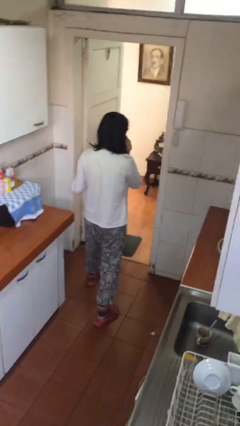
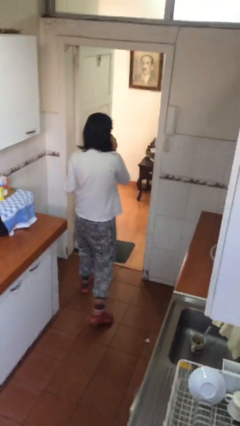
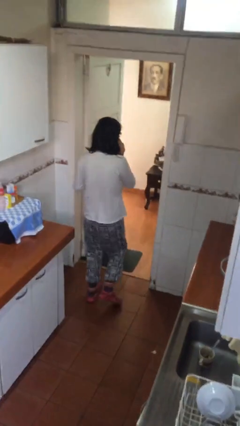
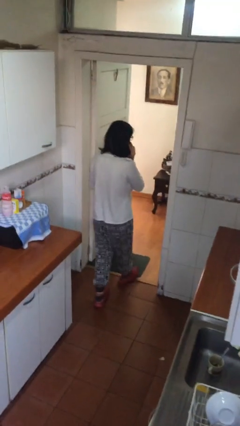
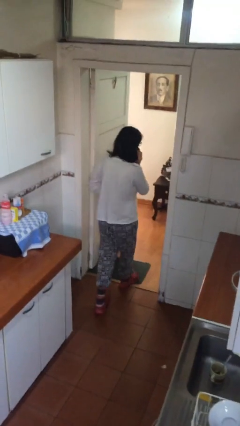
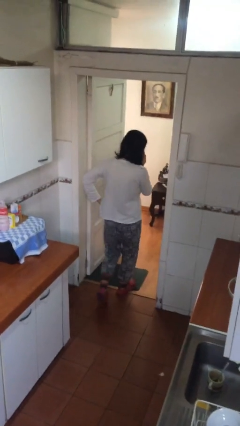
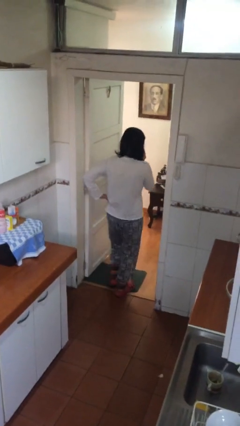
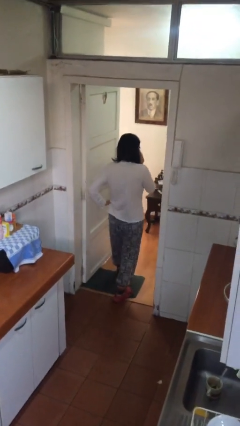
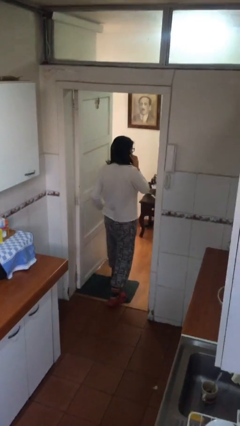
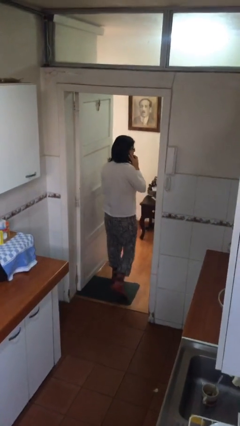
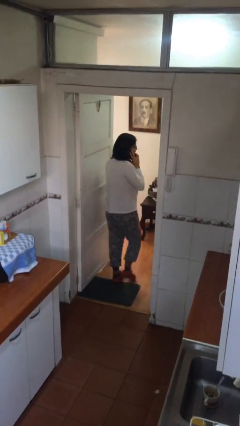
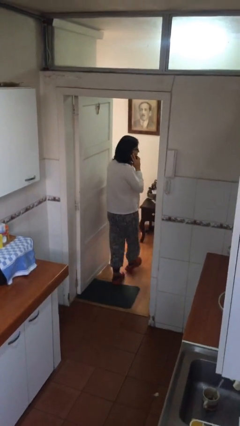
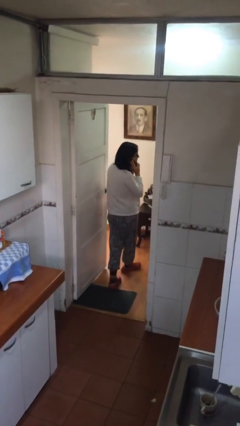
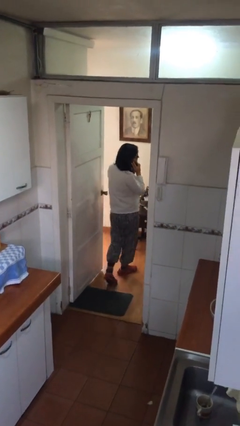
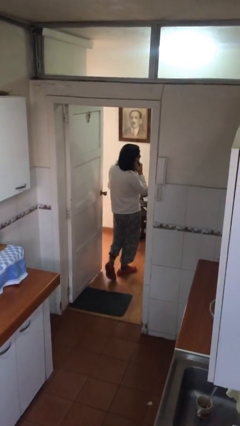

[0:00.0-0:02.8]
person exits scene through structure

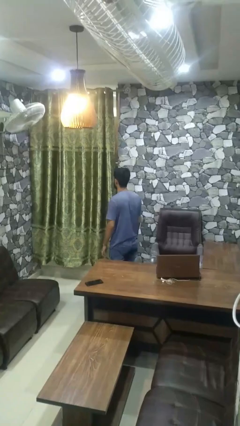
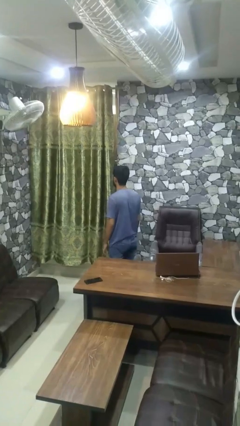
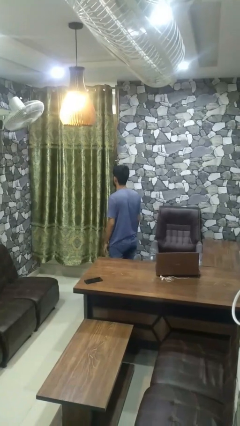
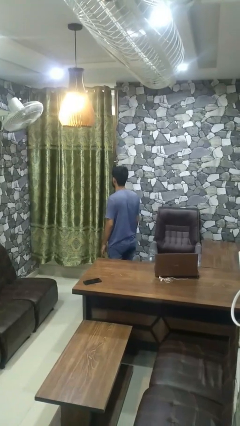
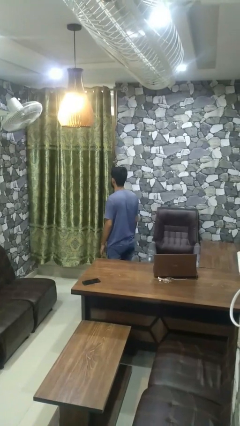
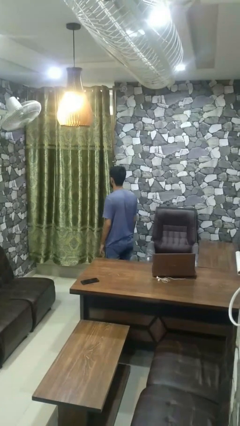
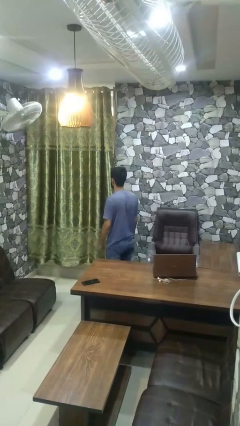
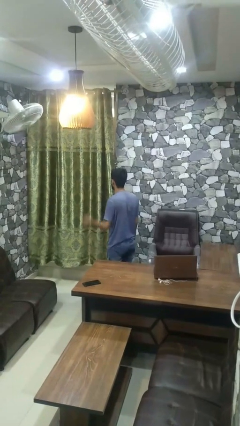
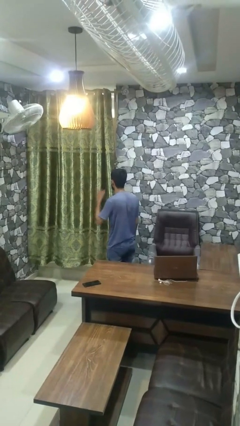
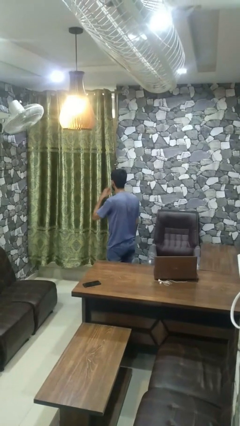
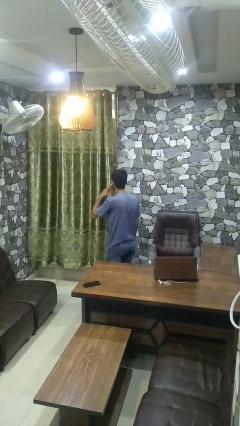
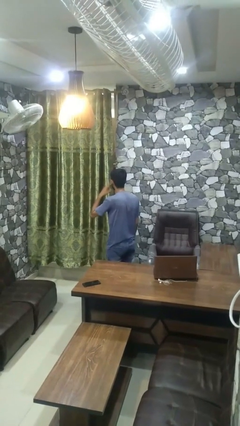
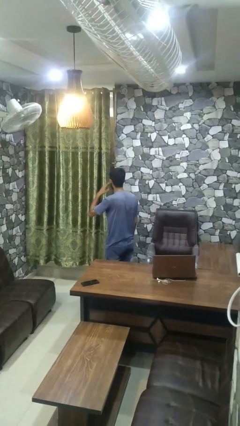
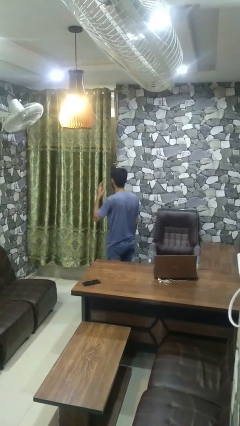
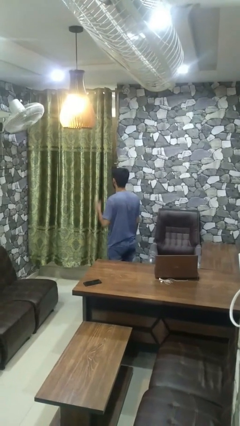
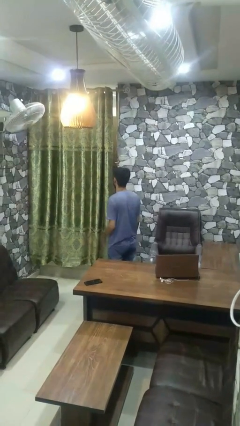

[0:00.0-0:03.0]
person gestures listen closely

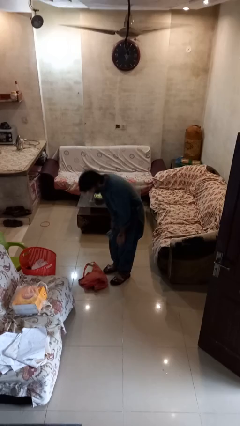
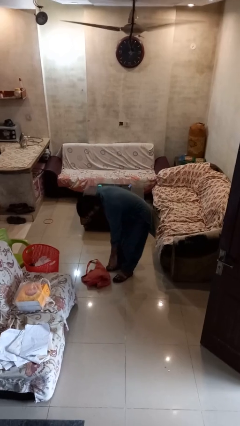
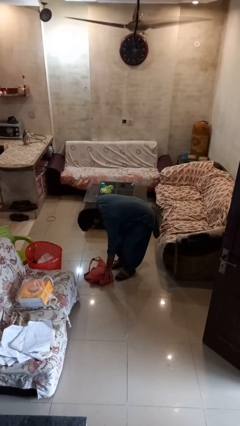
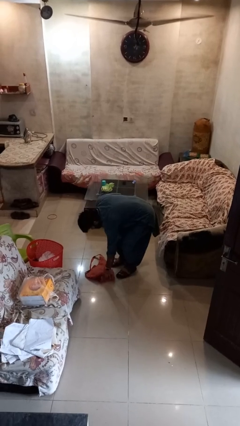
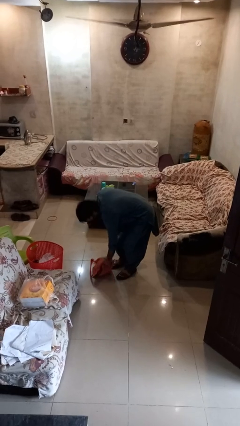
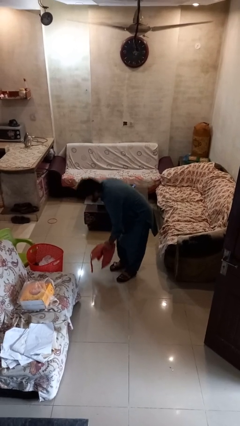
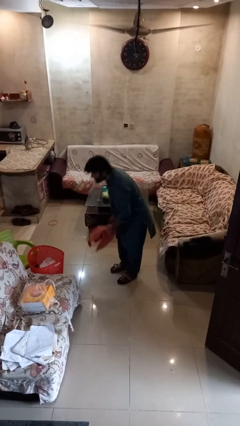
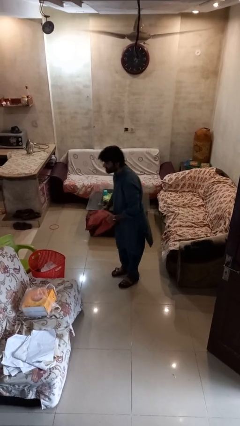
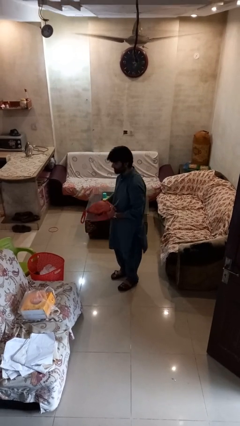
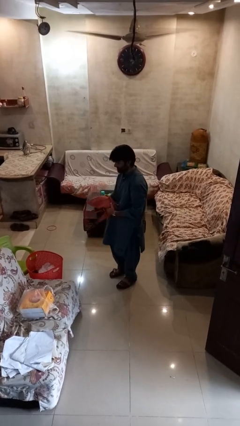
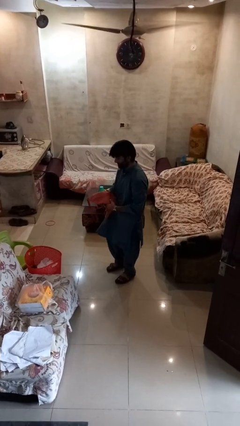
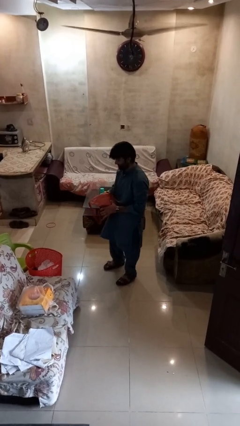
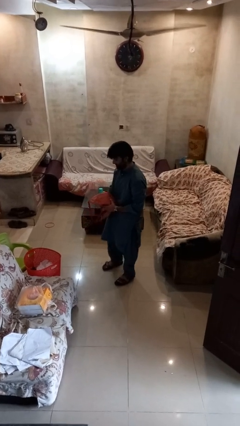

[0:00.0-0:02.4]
person picks up object from floor

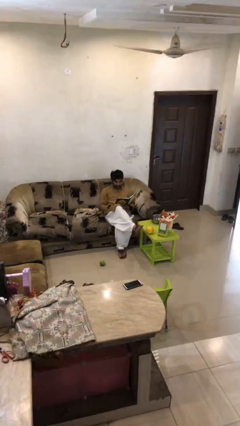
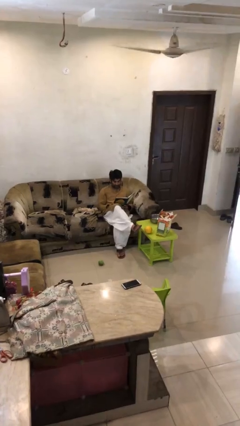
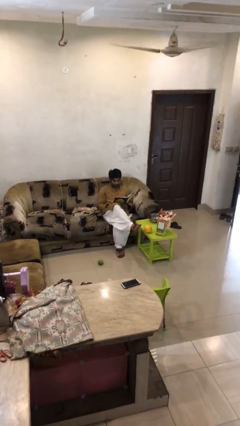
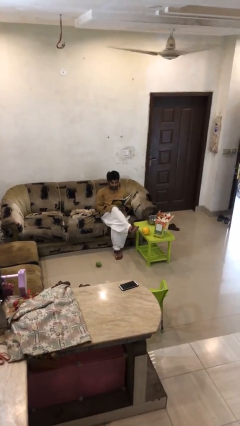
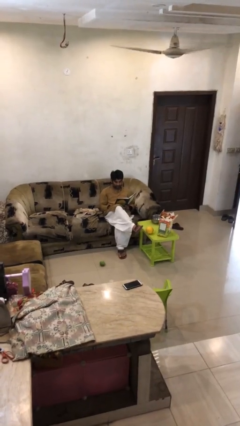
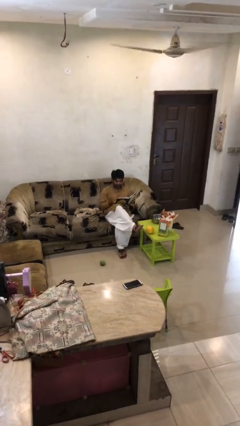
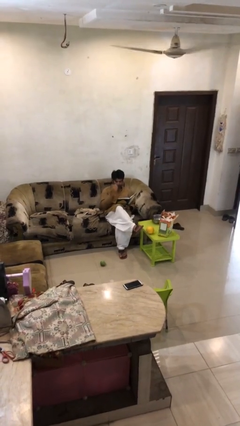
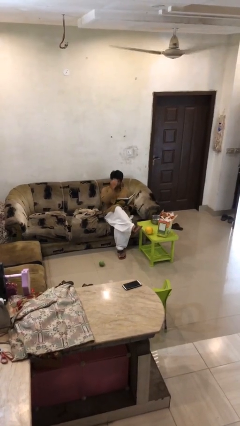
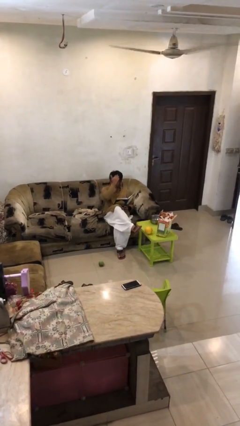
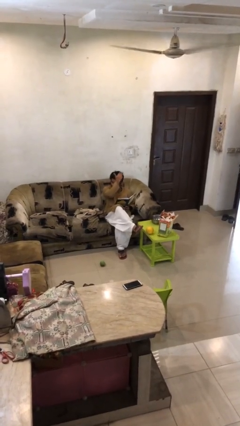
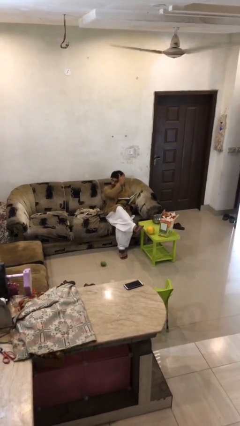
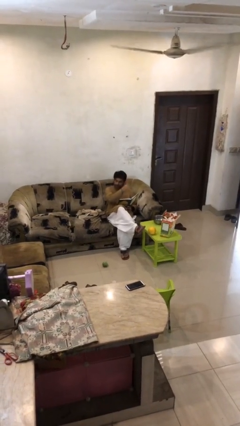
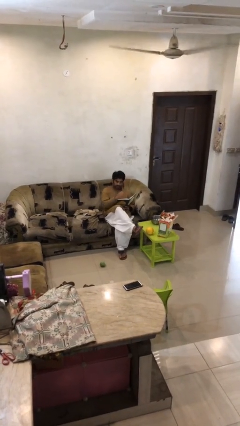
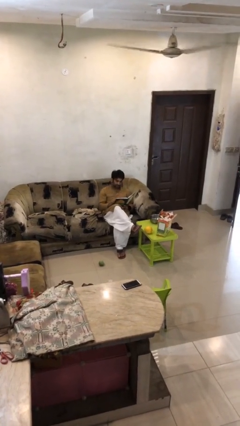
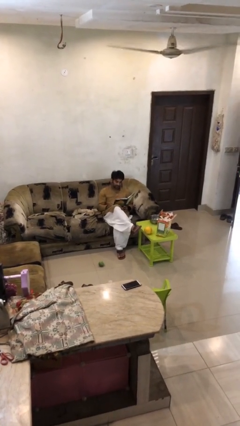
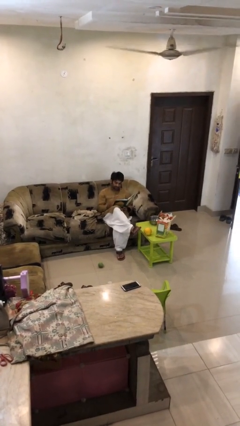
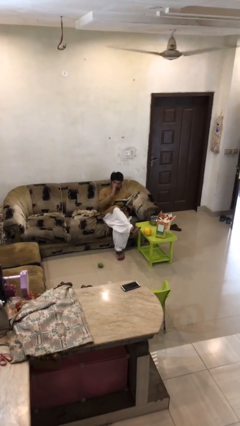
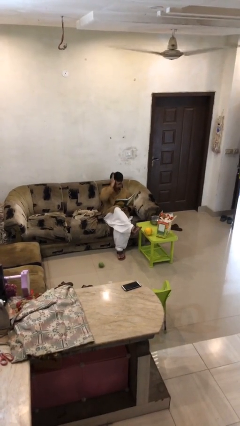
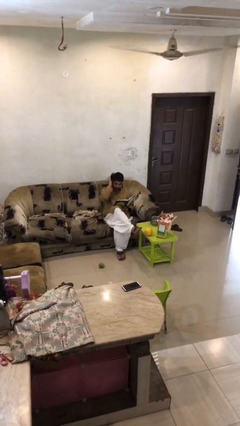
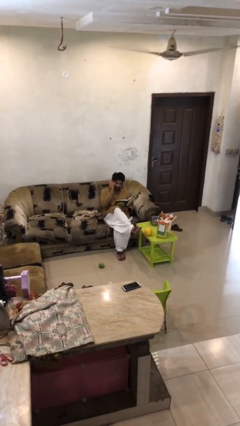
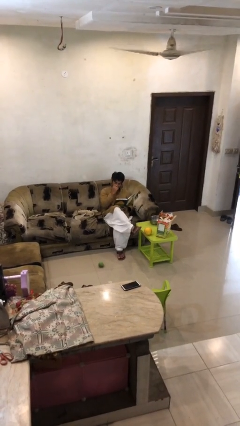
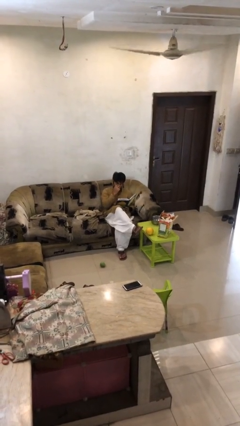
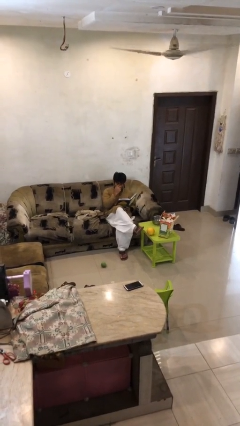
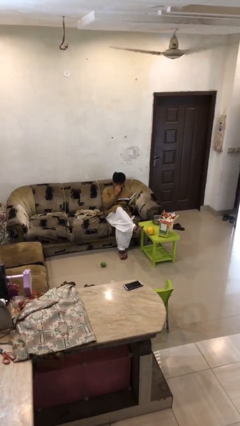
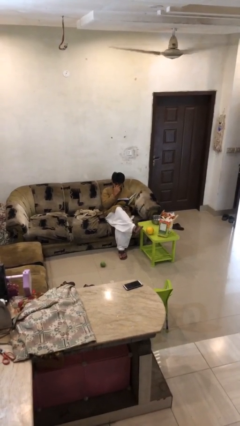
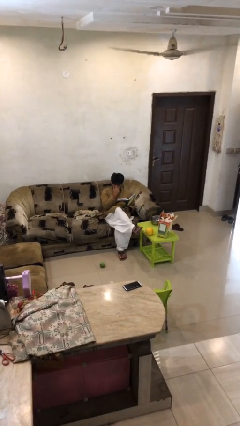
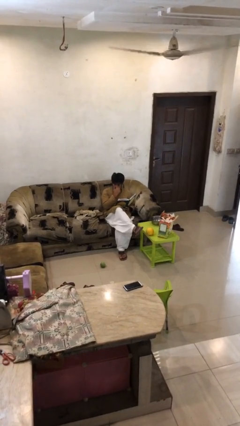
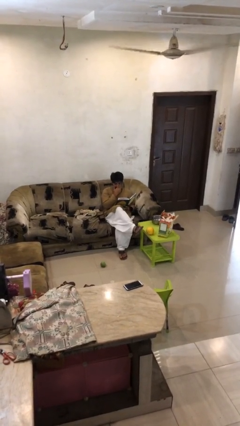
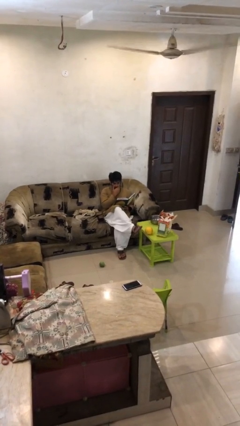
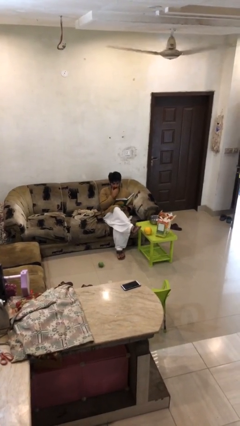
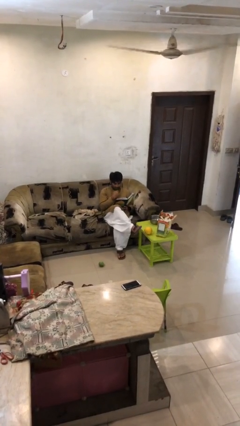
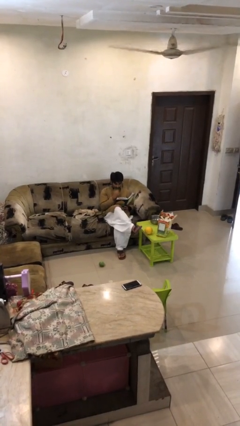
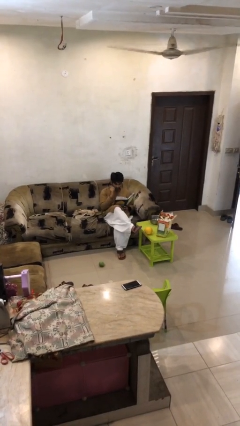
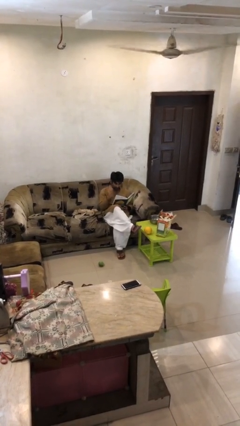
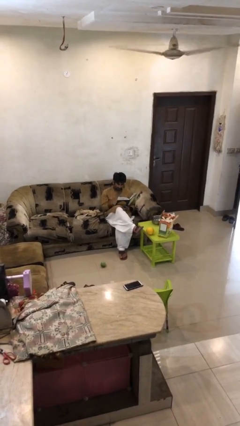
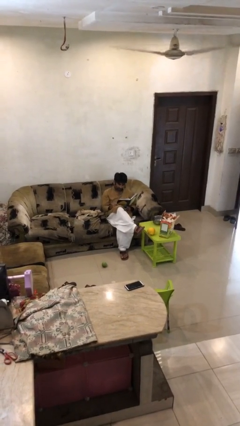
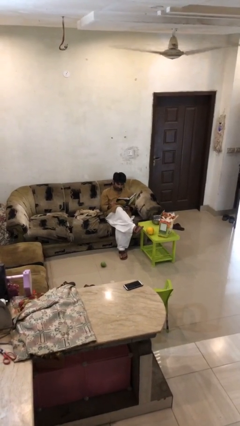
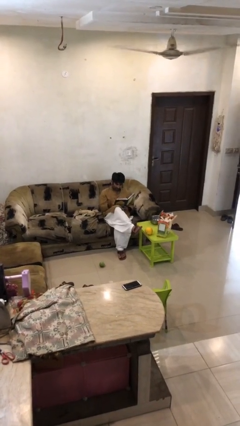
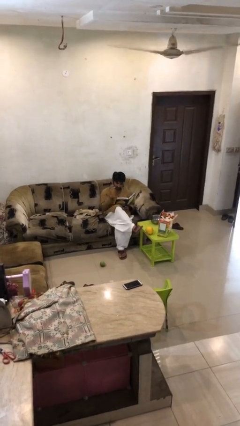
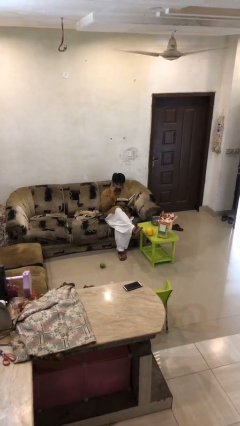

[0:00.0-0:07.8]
person reads document

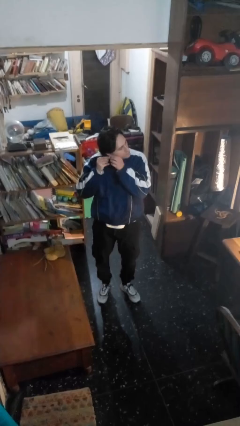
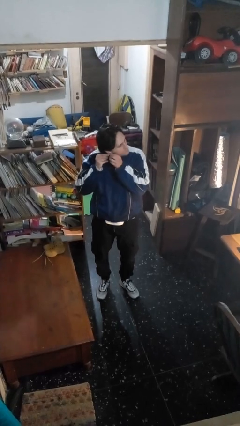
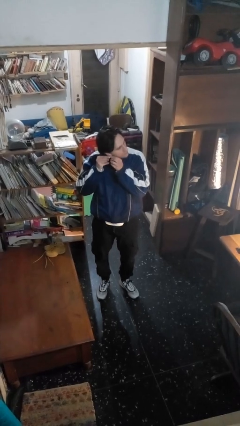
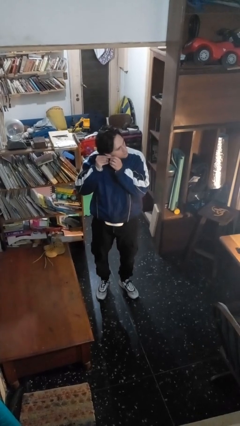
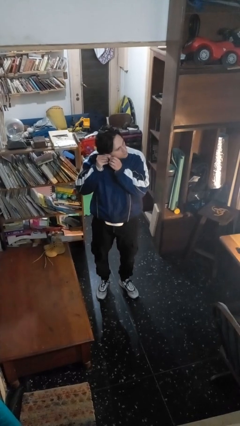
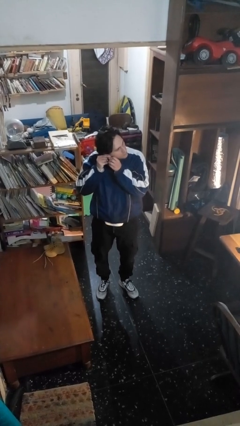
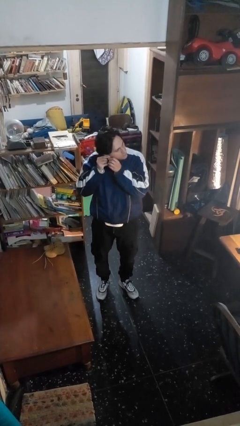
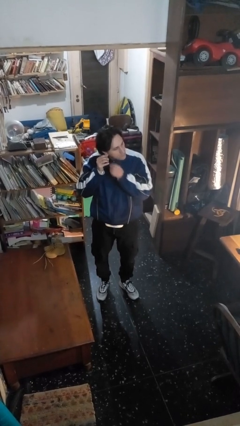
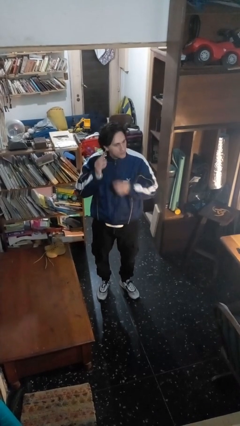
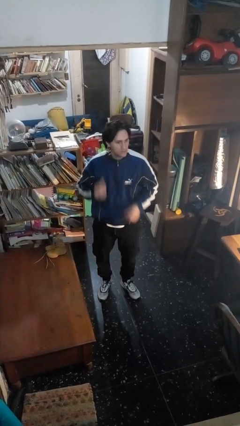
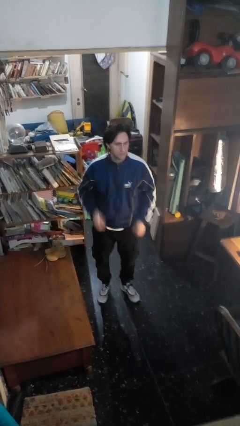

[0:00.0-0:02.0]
person puts on earrings
